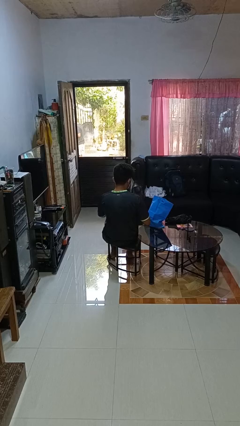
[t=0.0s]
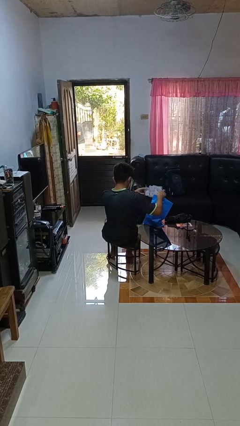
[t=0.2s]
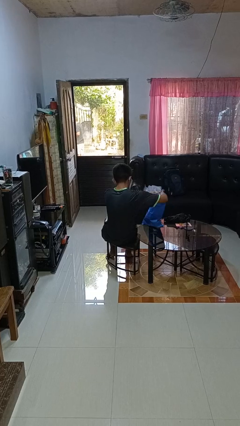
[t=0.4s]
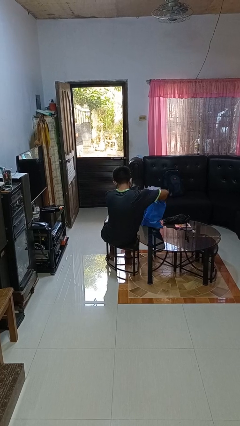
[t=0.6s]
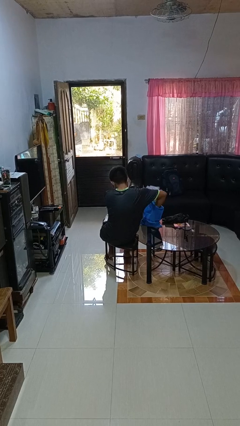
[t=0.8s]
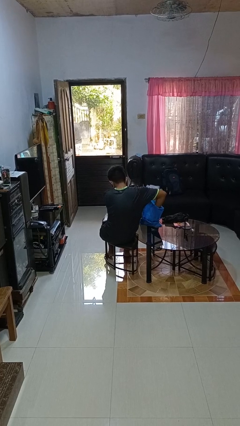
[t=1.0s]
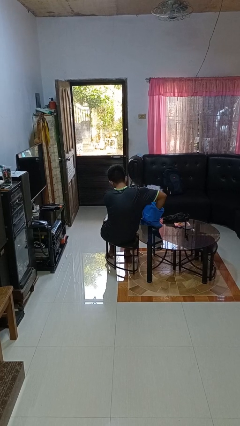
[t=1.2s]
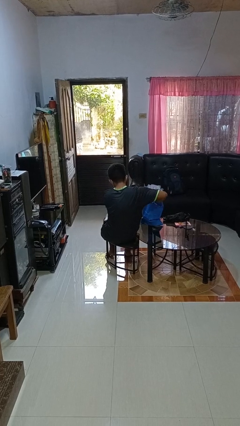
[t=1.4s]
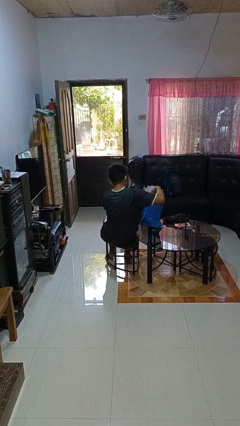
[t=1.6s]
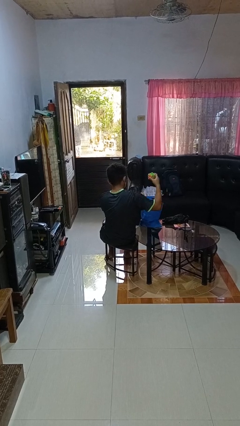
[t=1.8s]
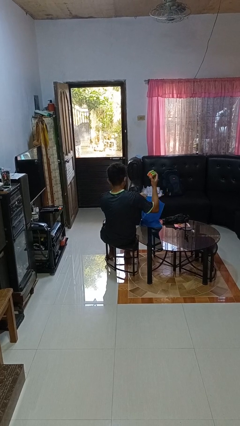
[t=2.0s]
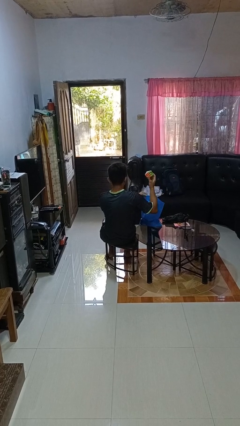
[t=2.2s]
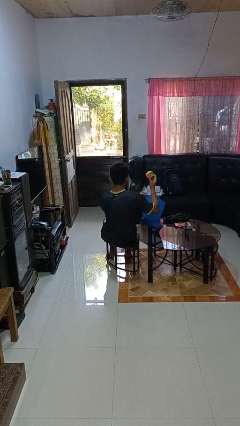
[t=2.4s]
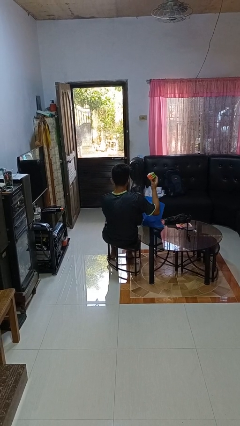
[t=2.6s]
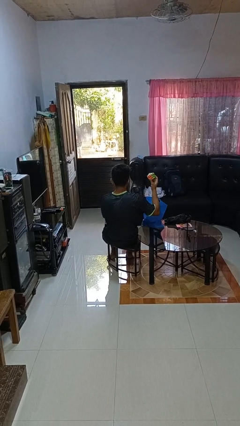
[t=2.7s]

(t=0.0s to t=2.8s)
person takes object from bag

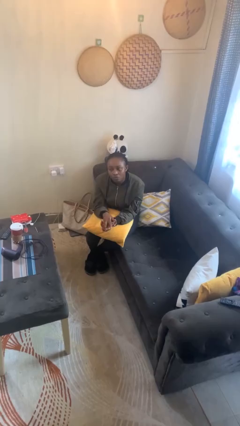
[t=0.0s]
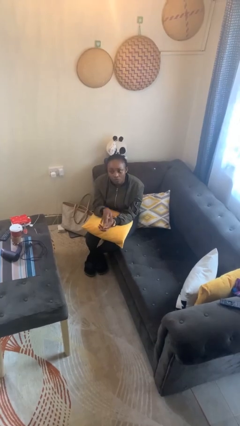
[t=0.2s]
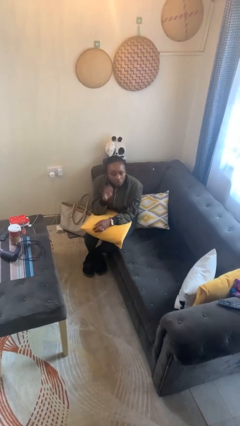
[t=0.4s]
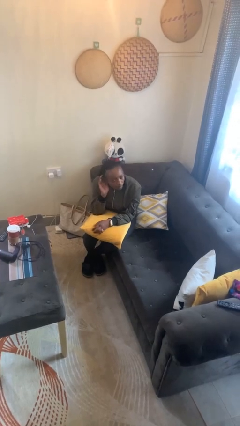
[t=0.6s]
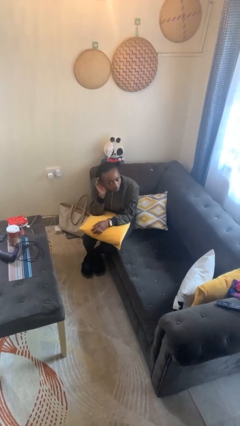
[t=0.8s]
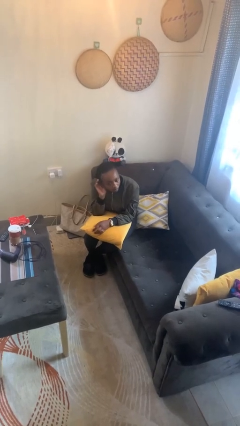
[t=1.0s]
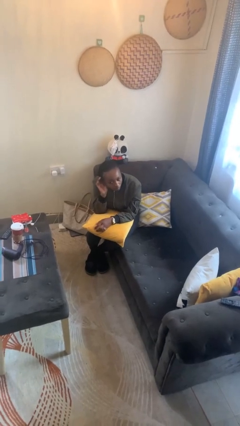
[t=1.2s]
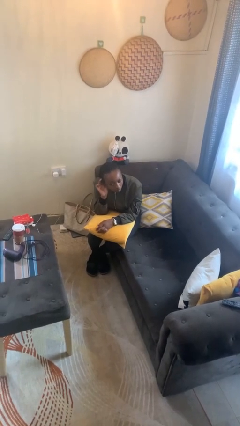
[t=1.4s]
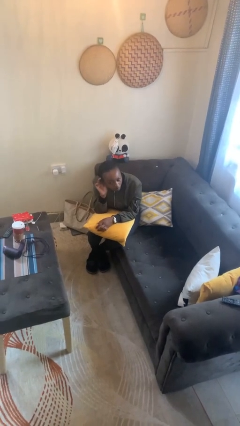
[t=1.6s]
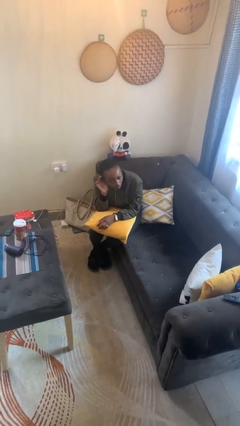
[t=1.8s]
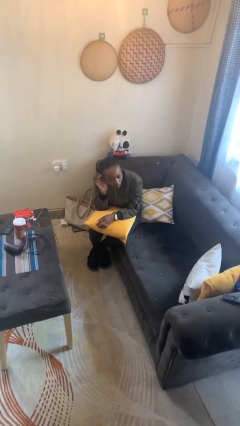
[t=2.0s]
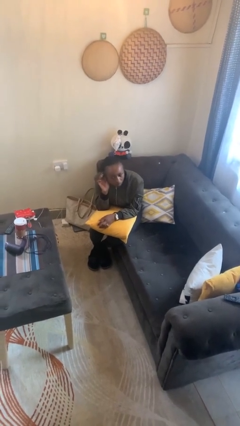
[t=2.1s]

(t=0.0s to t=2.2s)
person gestures listen closely

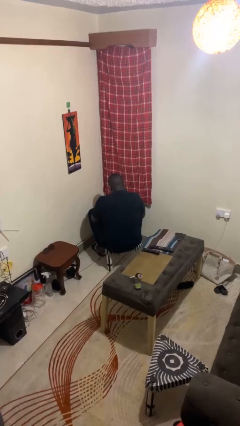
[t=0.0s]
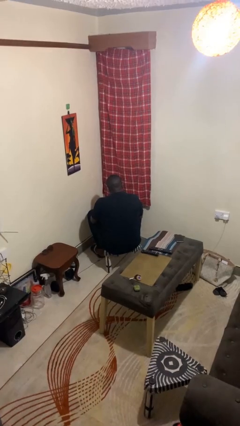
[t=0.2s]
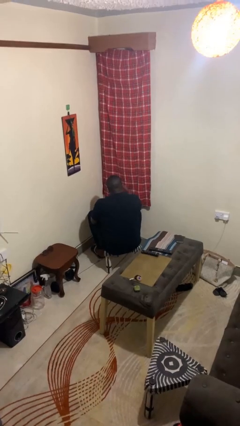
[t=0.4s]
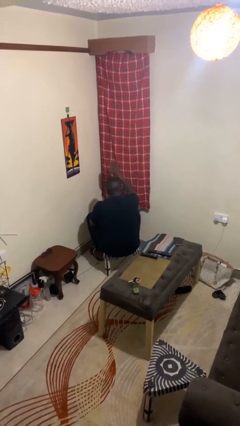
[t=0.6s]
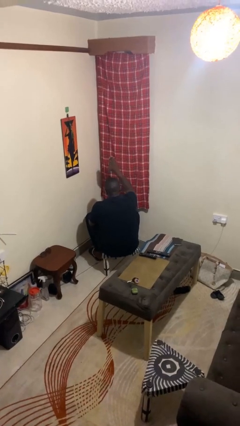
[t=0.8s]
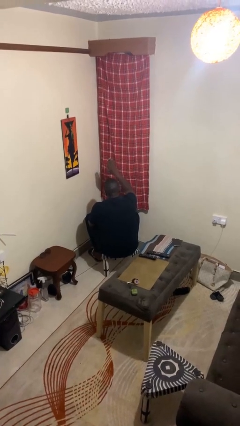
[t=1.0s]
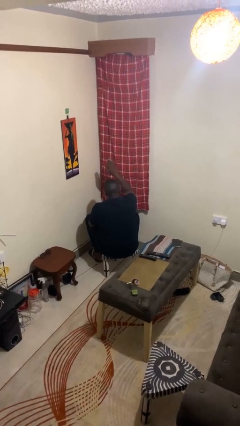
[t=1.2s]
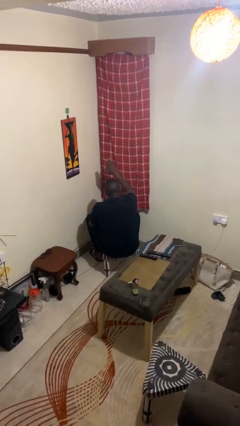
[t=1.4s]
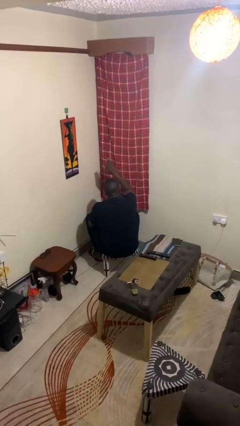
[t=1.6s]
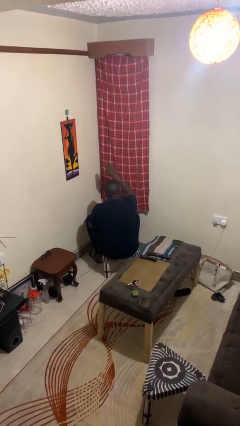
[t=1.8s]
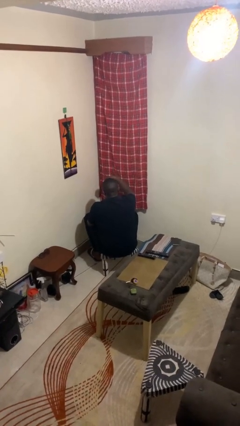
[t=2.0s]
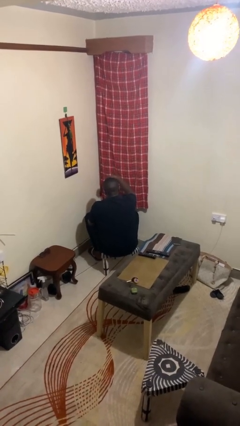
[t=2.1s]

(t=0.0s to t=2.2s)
person gestures swipe up

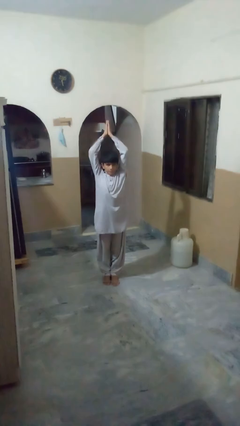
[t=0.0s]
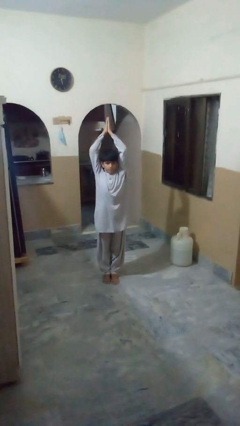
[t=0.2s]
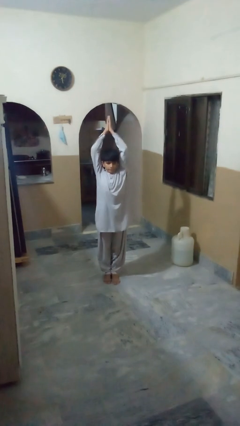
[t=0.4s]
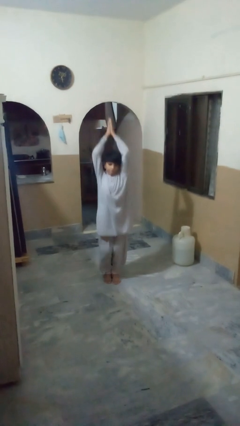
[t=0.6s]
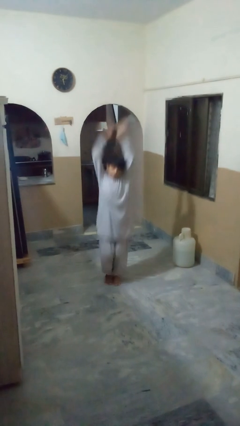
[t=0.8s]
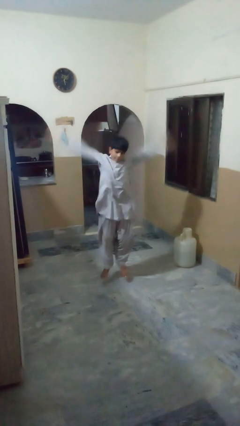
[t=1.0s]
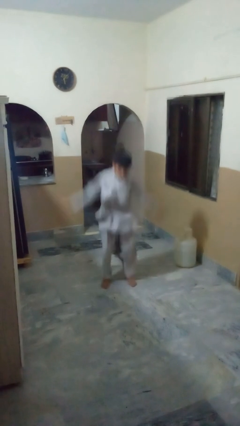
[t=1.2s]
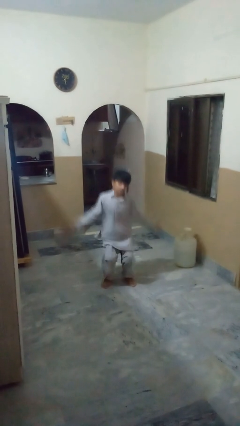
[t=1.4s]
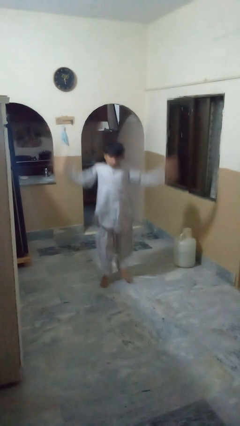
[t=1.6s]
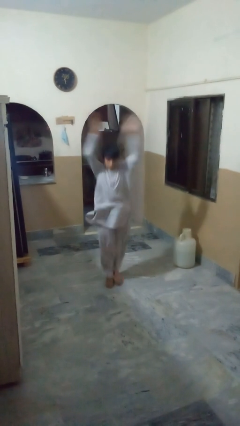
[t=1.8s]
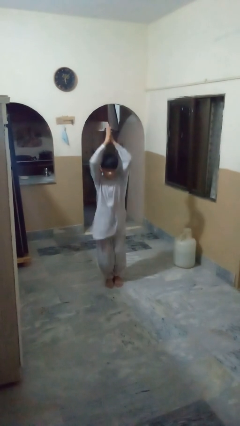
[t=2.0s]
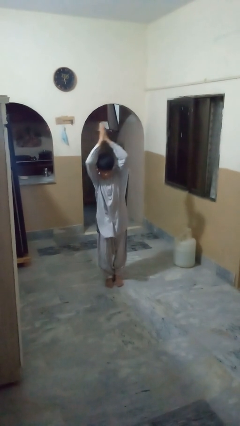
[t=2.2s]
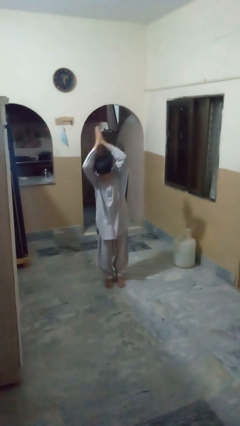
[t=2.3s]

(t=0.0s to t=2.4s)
person exercises with jumping jacks

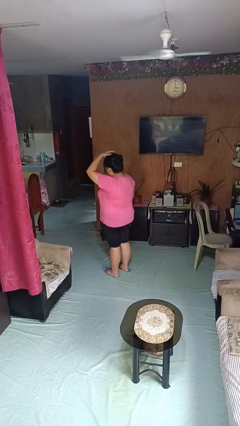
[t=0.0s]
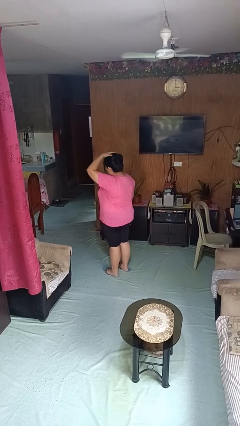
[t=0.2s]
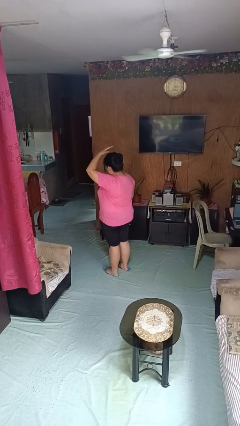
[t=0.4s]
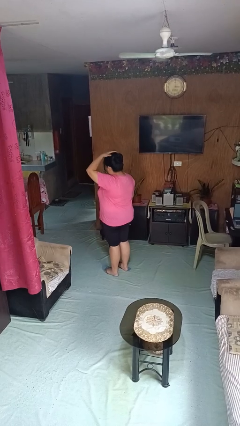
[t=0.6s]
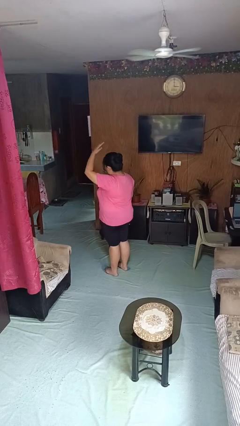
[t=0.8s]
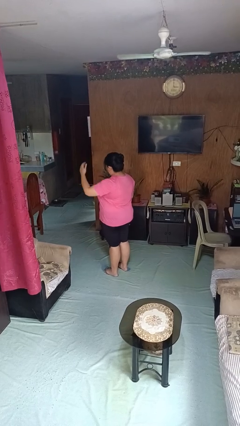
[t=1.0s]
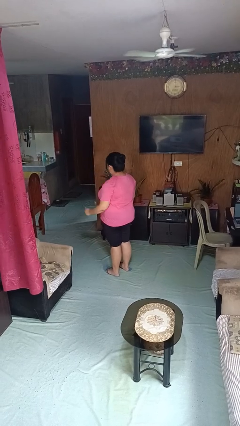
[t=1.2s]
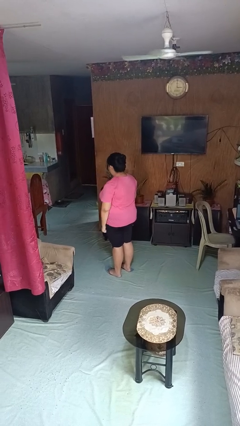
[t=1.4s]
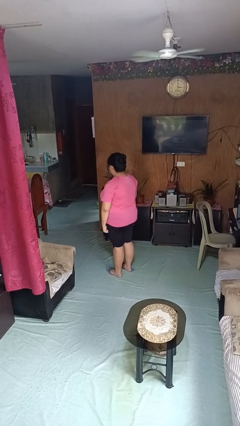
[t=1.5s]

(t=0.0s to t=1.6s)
person pats head

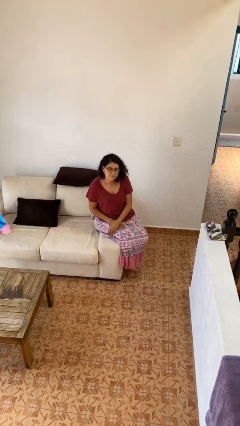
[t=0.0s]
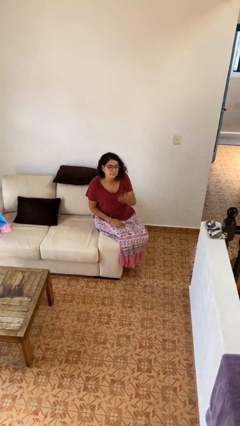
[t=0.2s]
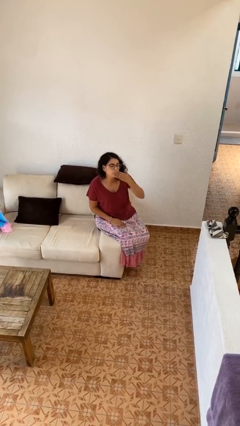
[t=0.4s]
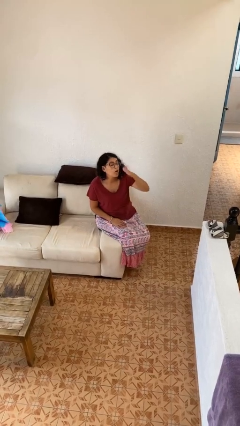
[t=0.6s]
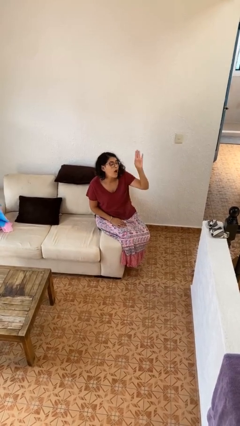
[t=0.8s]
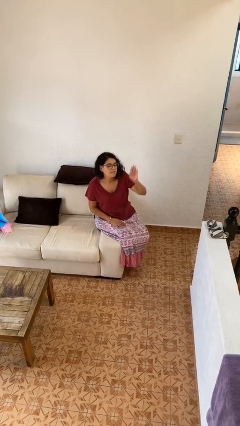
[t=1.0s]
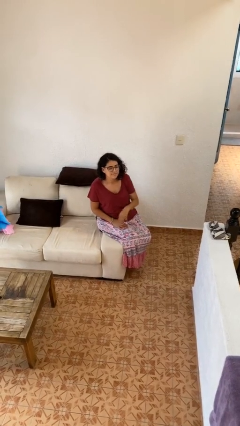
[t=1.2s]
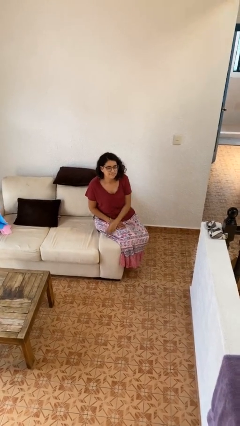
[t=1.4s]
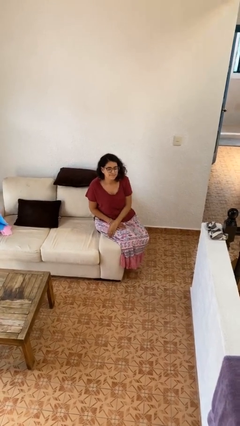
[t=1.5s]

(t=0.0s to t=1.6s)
person gestures blow kiss

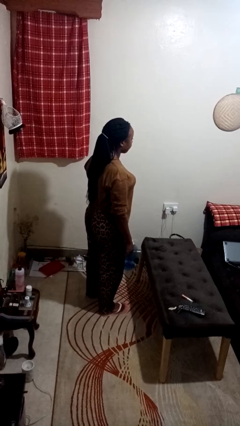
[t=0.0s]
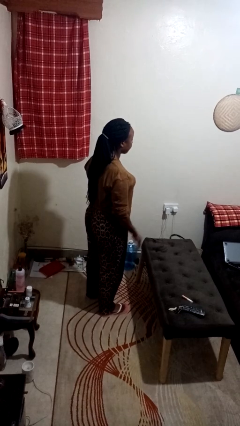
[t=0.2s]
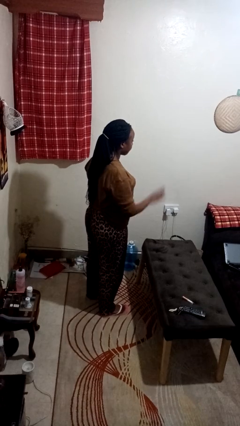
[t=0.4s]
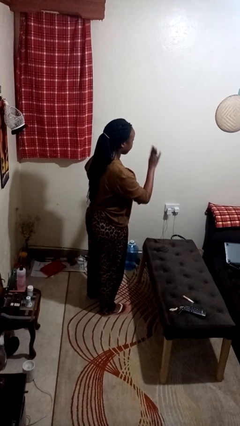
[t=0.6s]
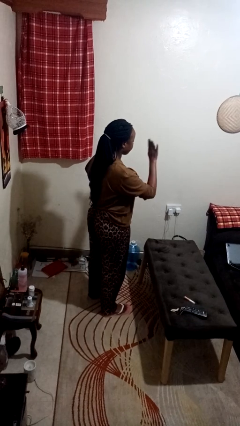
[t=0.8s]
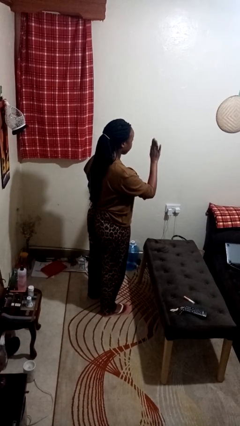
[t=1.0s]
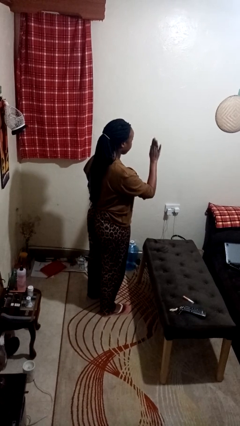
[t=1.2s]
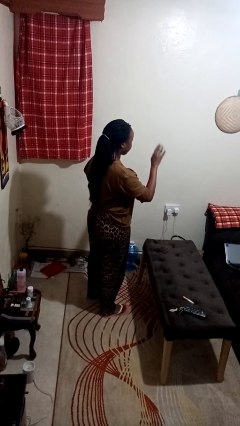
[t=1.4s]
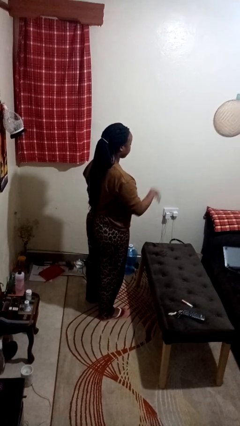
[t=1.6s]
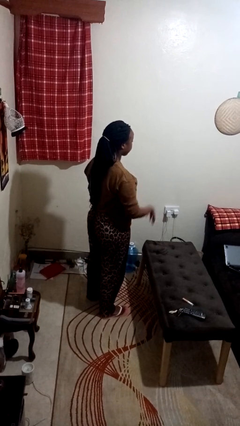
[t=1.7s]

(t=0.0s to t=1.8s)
person gestures stop

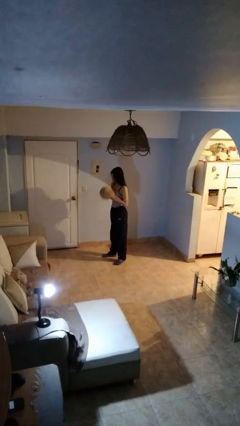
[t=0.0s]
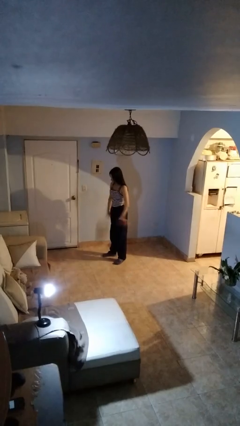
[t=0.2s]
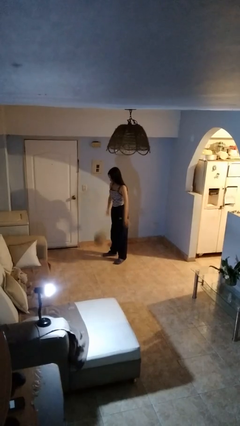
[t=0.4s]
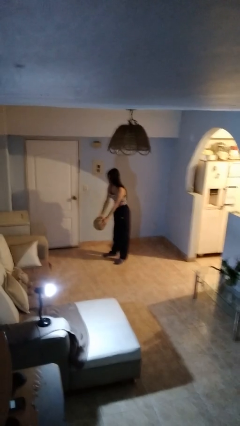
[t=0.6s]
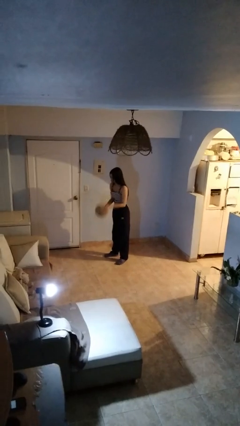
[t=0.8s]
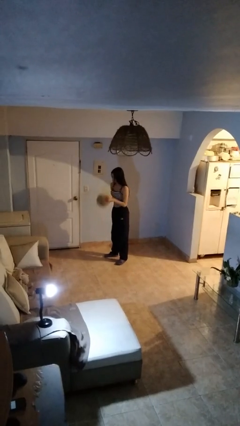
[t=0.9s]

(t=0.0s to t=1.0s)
person bounces ball on floor

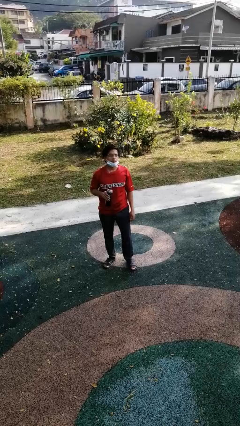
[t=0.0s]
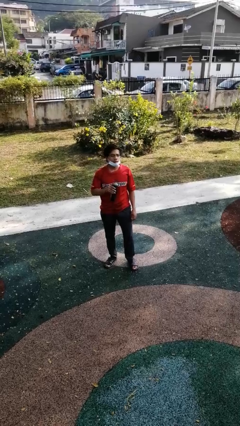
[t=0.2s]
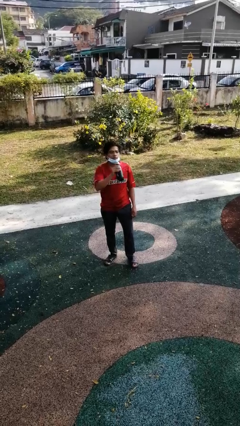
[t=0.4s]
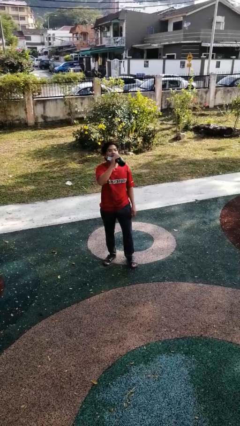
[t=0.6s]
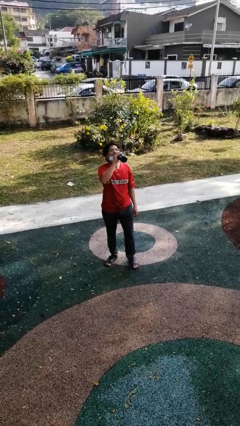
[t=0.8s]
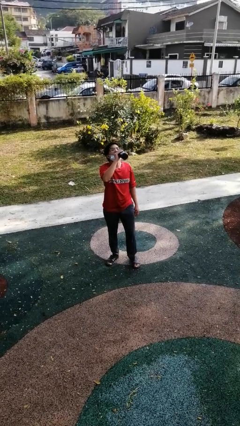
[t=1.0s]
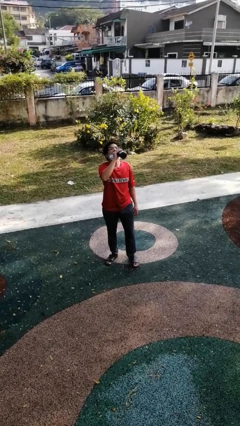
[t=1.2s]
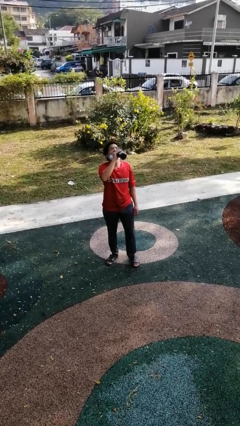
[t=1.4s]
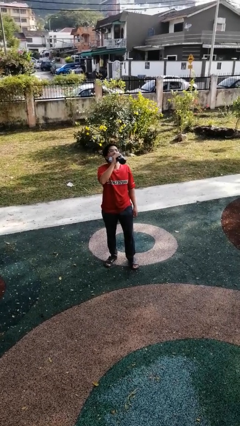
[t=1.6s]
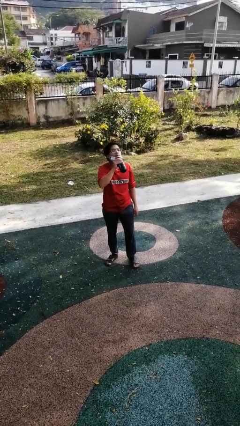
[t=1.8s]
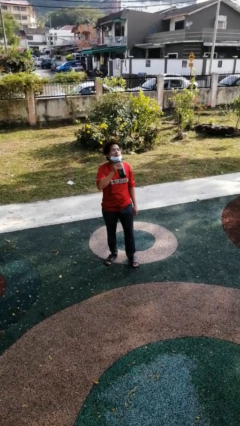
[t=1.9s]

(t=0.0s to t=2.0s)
person drinks from bottle
